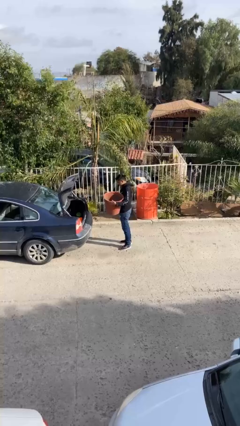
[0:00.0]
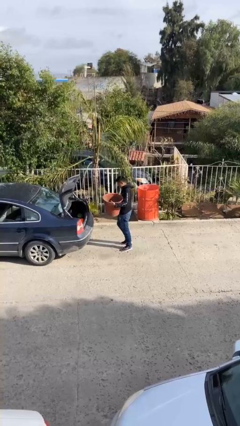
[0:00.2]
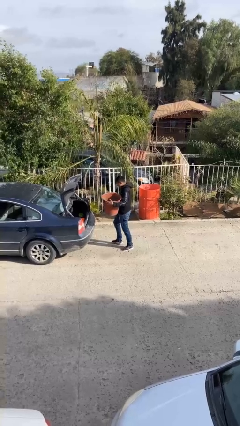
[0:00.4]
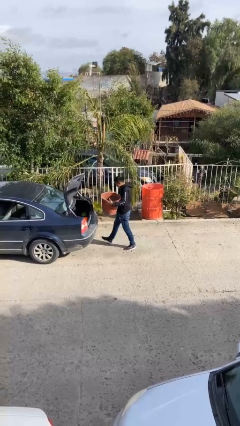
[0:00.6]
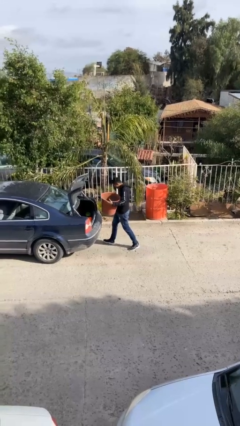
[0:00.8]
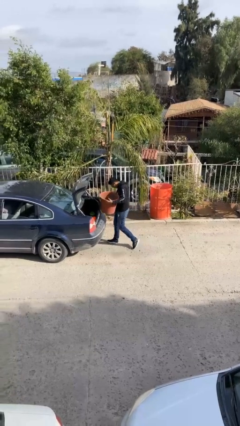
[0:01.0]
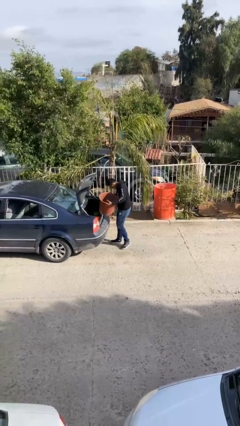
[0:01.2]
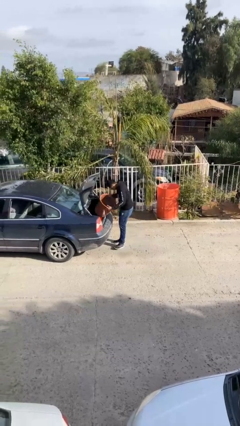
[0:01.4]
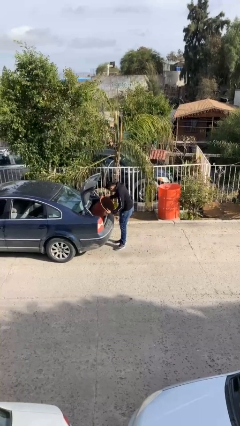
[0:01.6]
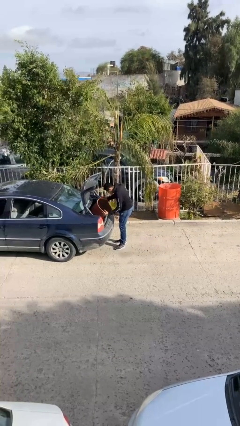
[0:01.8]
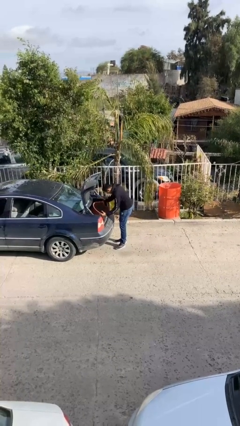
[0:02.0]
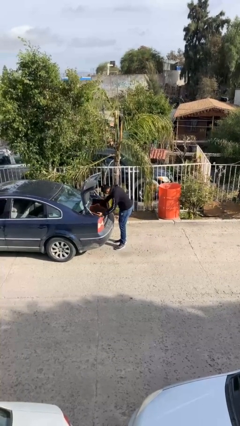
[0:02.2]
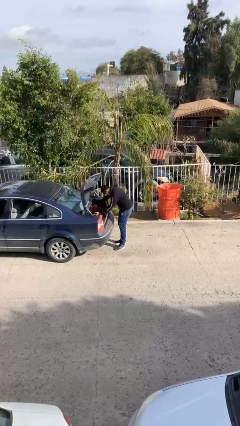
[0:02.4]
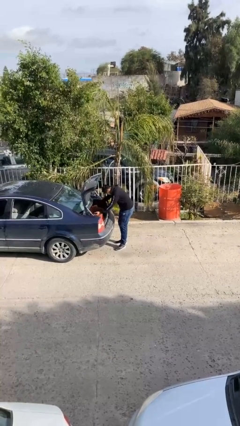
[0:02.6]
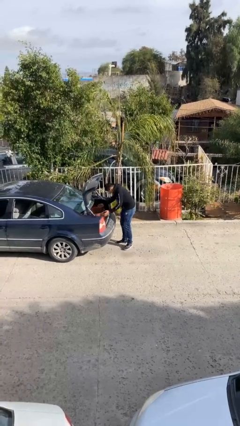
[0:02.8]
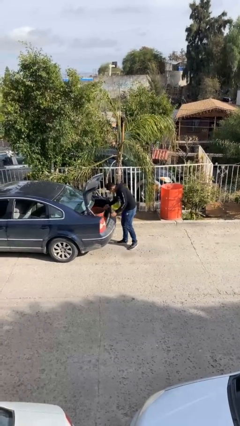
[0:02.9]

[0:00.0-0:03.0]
person loads car

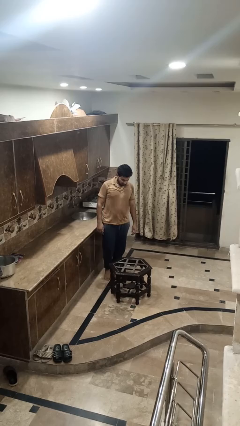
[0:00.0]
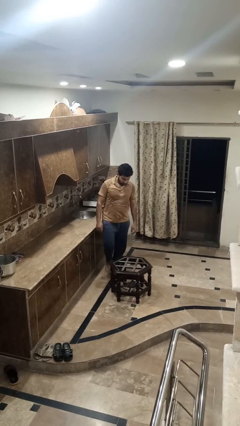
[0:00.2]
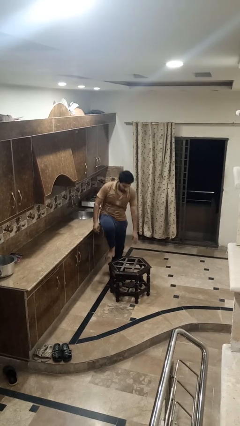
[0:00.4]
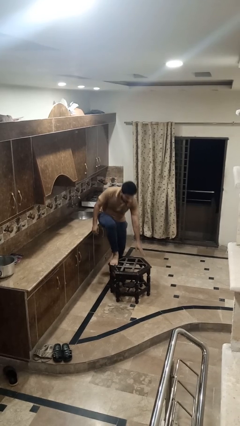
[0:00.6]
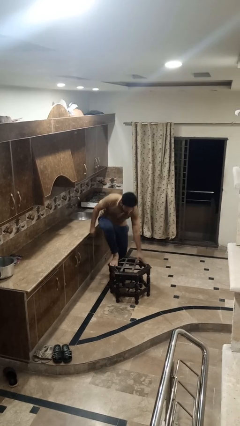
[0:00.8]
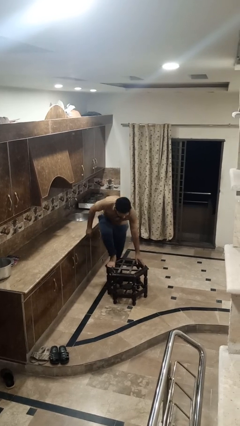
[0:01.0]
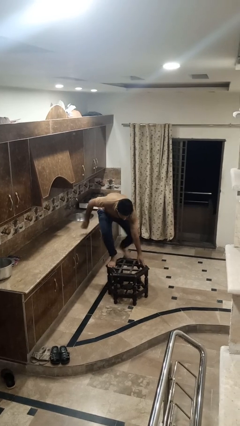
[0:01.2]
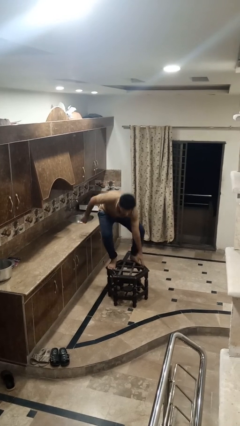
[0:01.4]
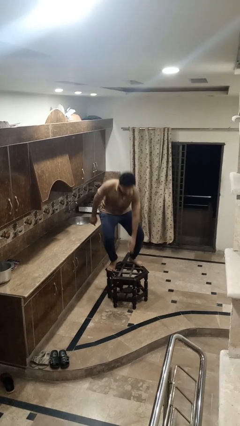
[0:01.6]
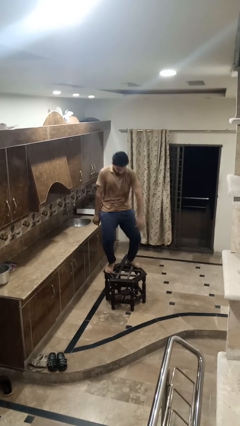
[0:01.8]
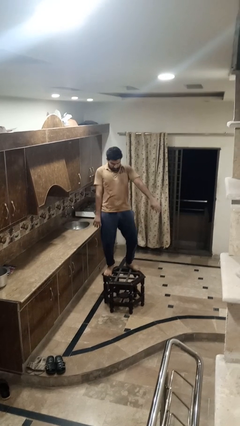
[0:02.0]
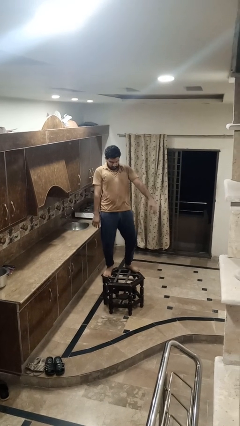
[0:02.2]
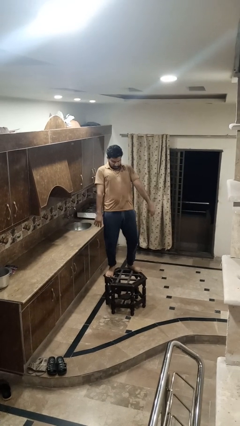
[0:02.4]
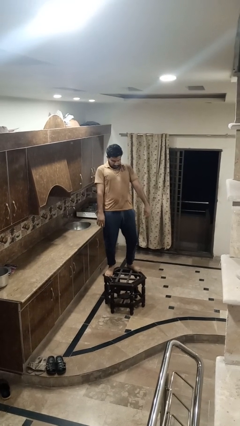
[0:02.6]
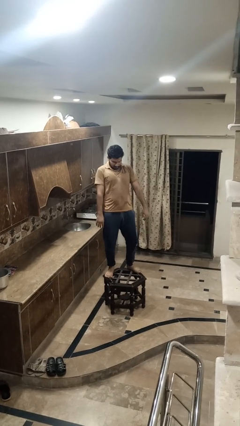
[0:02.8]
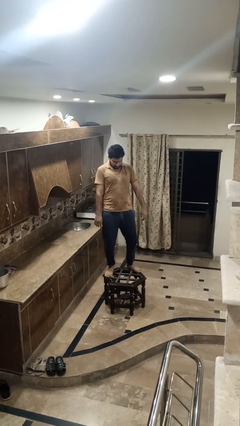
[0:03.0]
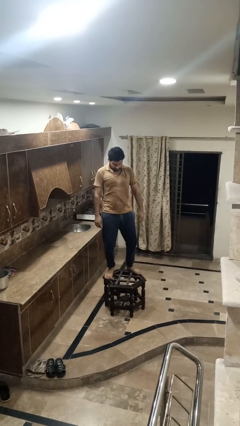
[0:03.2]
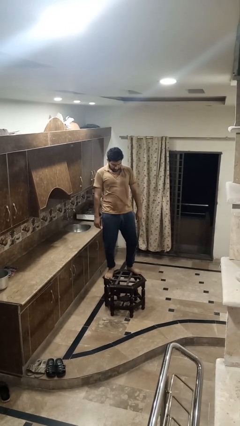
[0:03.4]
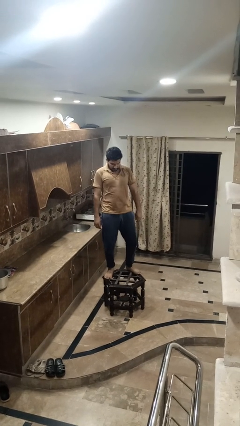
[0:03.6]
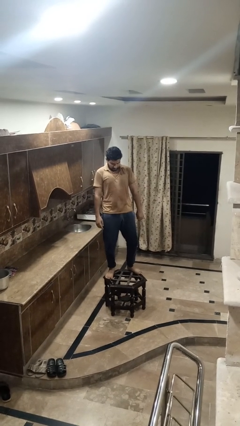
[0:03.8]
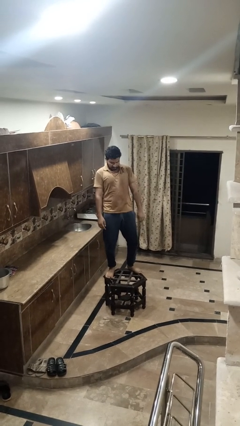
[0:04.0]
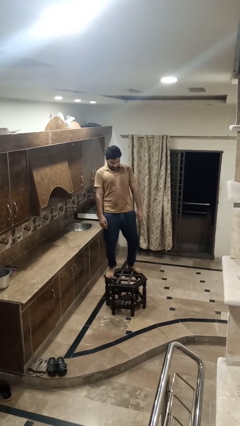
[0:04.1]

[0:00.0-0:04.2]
person climbs on table

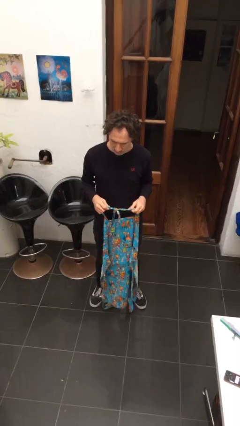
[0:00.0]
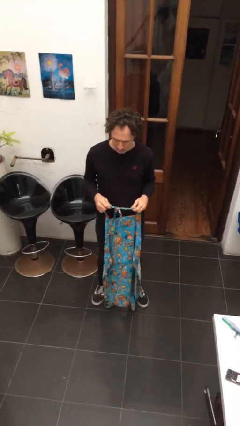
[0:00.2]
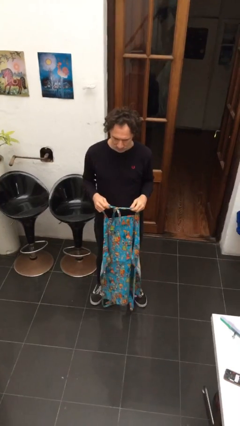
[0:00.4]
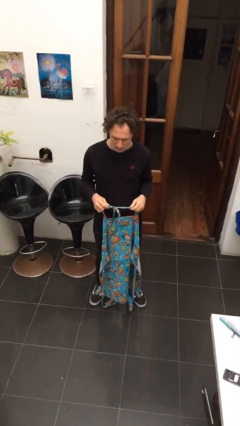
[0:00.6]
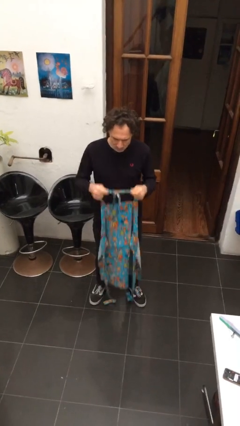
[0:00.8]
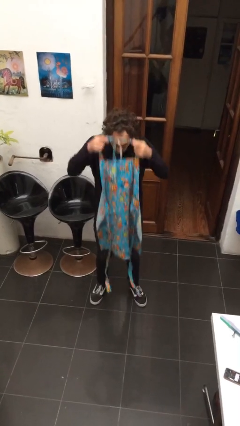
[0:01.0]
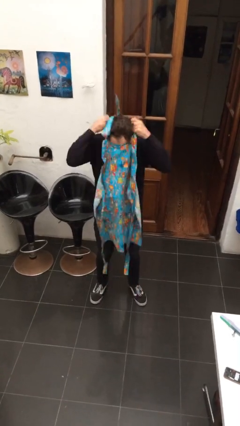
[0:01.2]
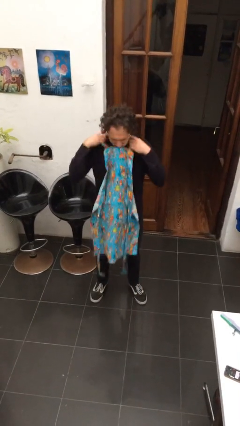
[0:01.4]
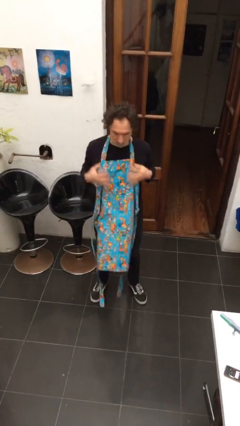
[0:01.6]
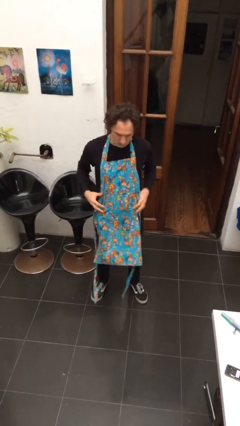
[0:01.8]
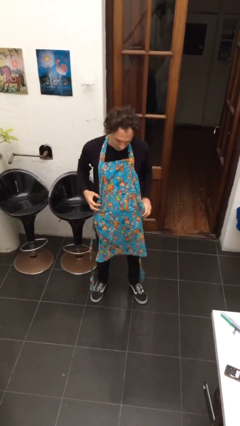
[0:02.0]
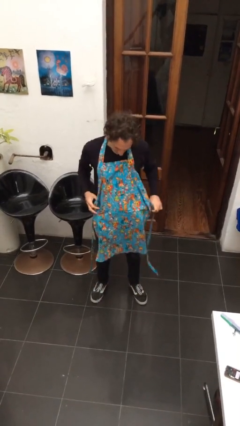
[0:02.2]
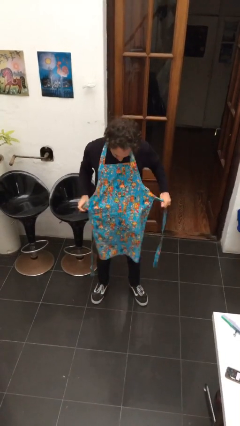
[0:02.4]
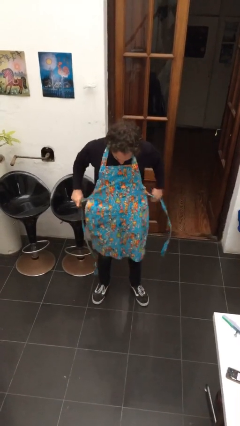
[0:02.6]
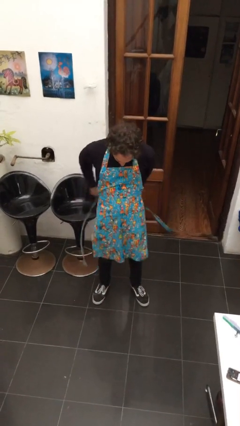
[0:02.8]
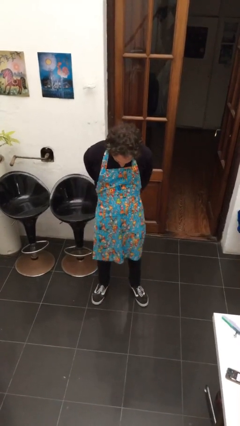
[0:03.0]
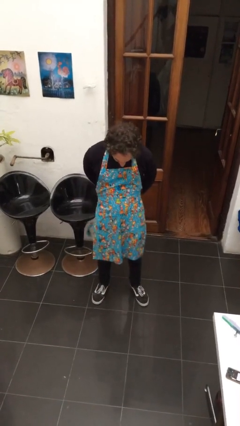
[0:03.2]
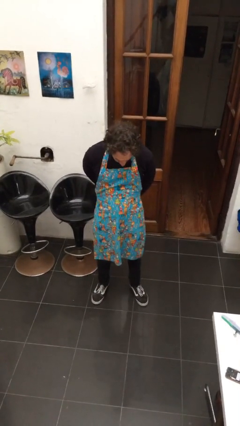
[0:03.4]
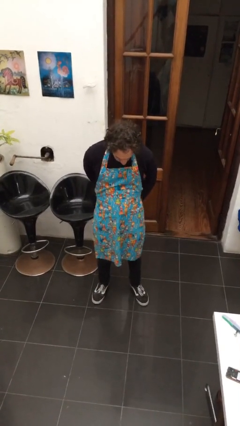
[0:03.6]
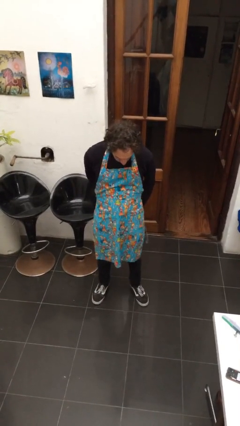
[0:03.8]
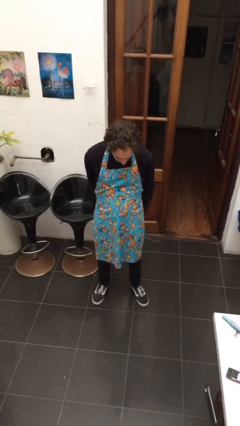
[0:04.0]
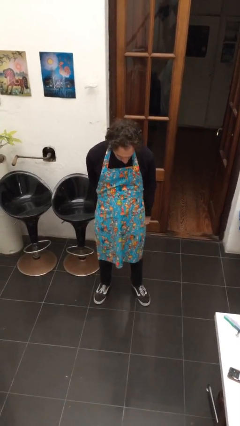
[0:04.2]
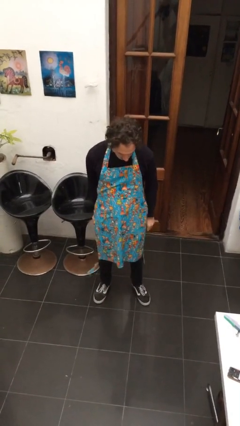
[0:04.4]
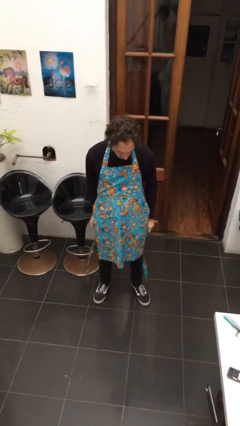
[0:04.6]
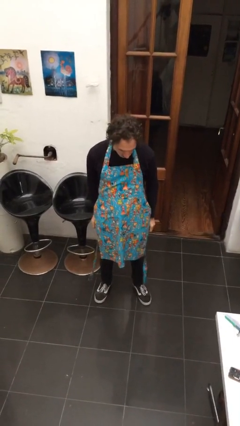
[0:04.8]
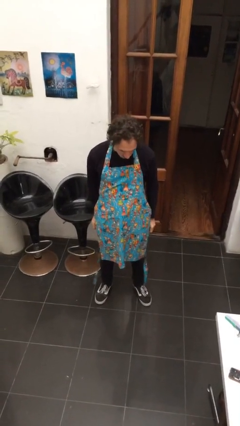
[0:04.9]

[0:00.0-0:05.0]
person puts on apron

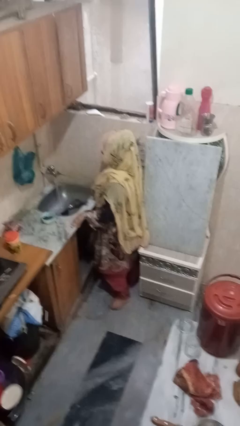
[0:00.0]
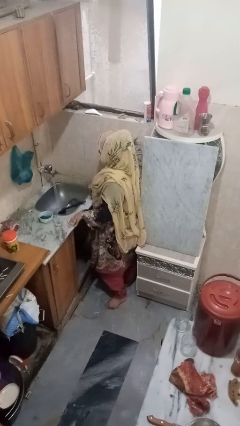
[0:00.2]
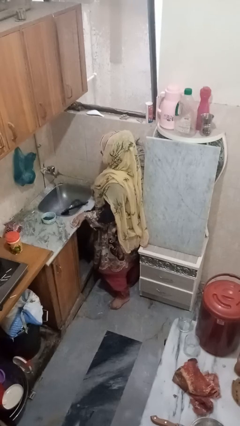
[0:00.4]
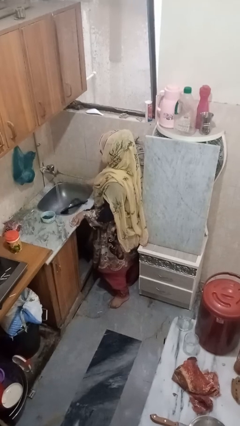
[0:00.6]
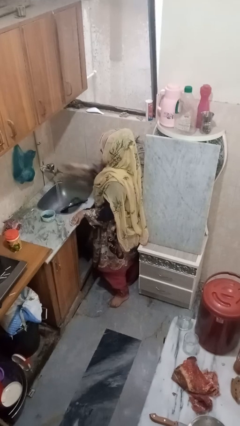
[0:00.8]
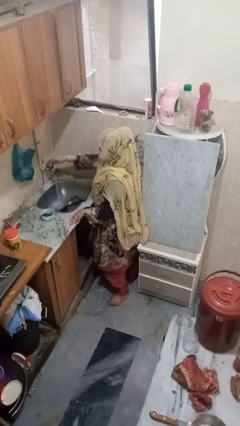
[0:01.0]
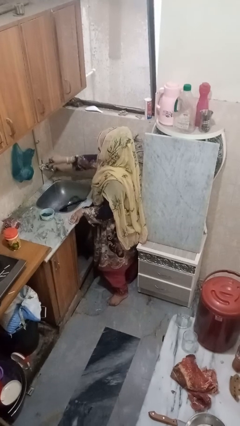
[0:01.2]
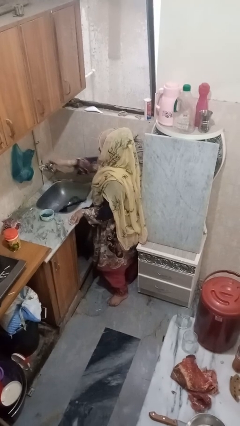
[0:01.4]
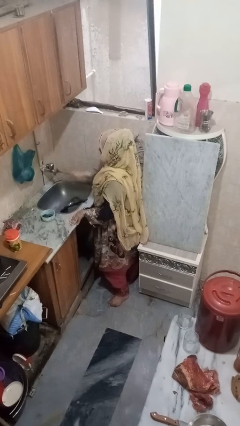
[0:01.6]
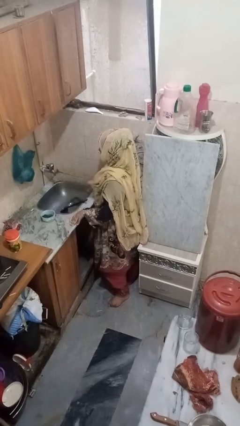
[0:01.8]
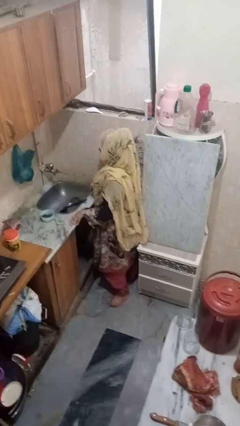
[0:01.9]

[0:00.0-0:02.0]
person turns off faucet

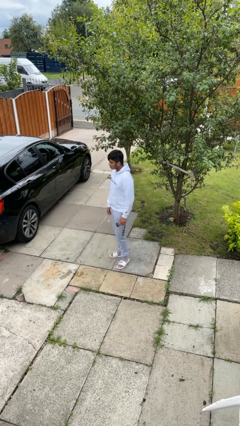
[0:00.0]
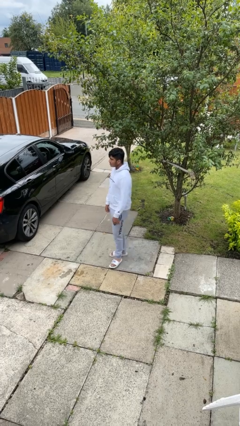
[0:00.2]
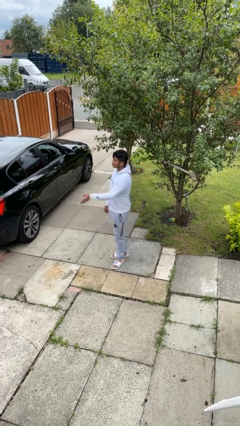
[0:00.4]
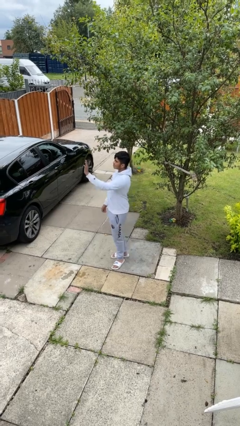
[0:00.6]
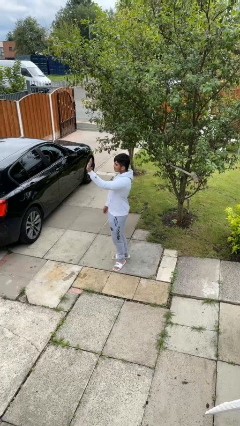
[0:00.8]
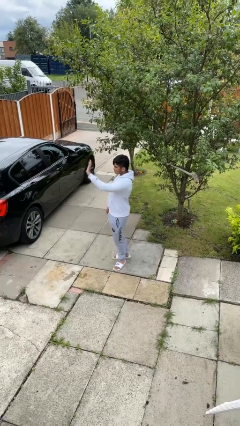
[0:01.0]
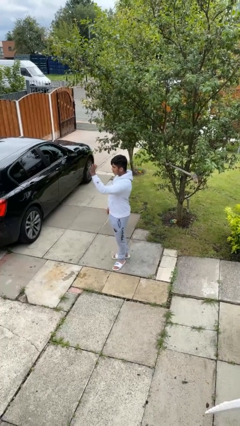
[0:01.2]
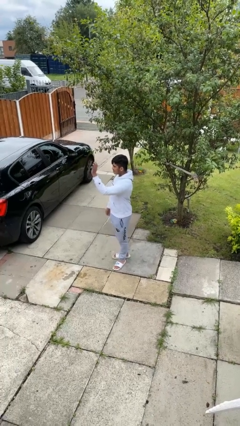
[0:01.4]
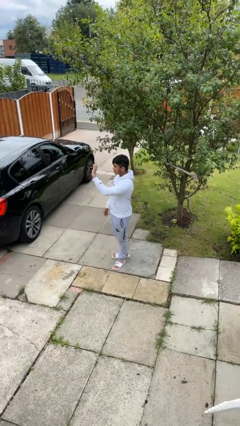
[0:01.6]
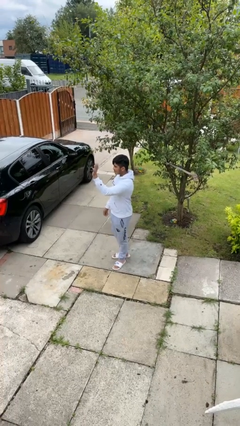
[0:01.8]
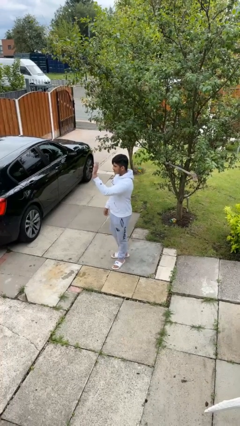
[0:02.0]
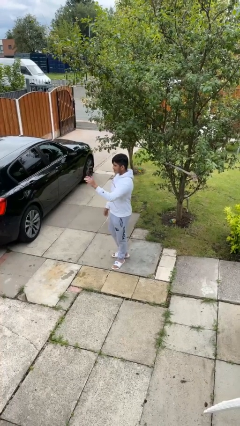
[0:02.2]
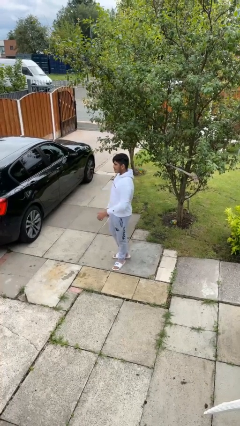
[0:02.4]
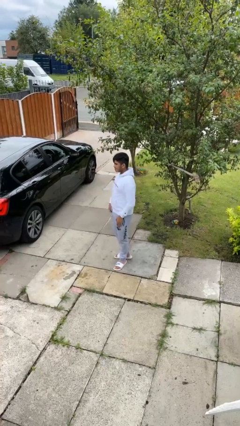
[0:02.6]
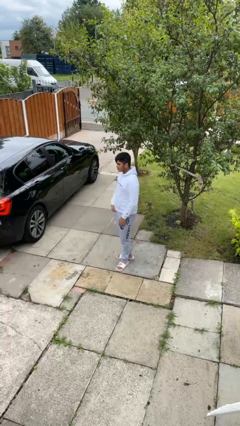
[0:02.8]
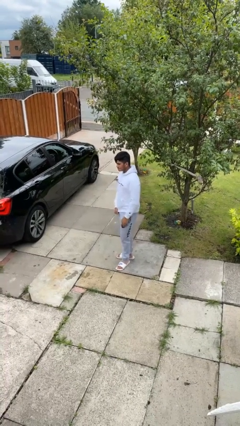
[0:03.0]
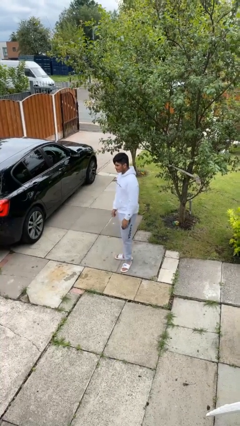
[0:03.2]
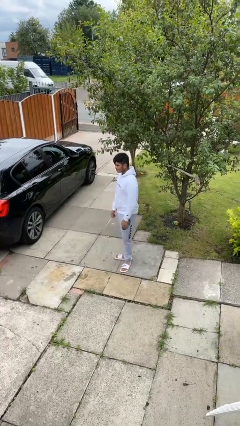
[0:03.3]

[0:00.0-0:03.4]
person waves at person
